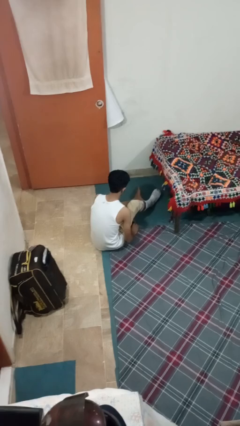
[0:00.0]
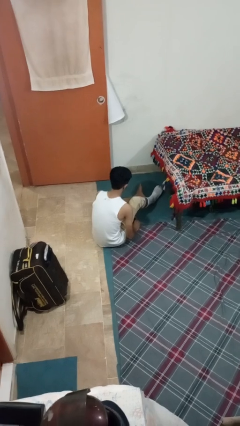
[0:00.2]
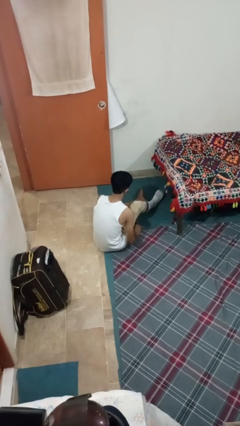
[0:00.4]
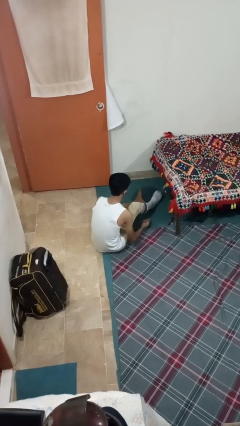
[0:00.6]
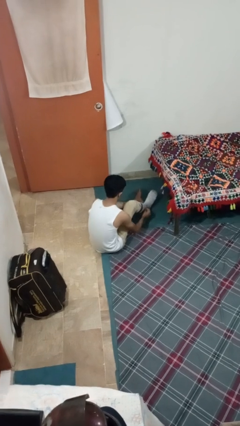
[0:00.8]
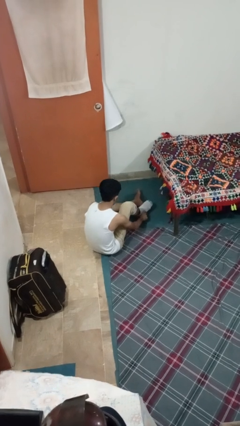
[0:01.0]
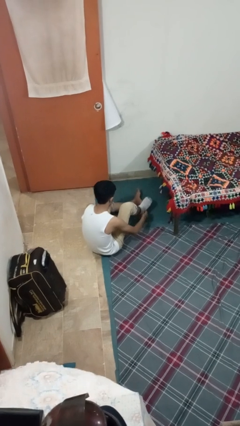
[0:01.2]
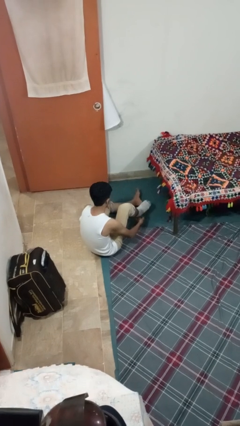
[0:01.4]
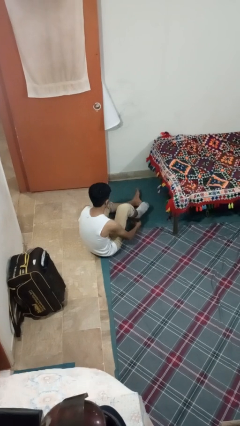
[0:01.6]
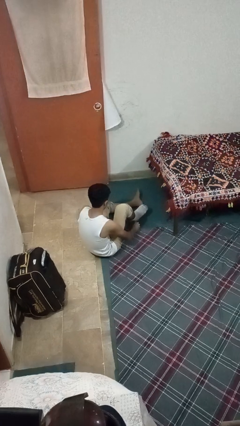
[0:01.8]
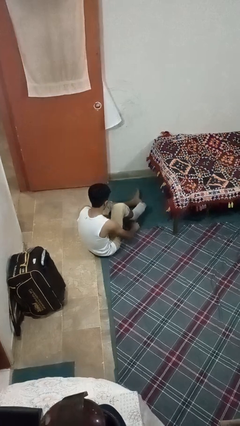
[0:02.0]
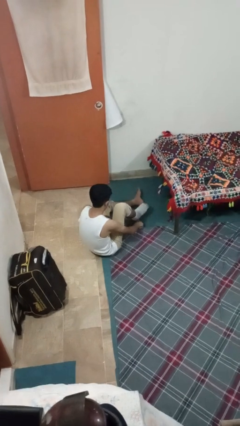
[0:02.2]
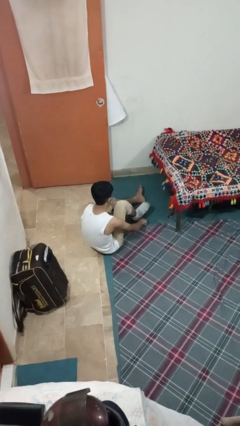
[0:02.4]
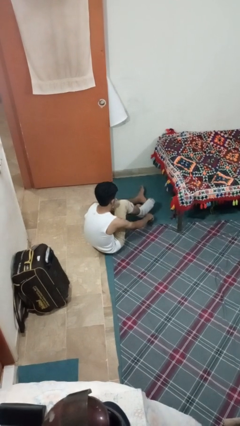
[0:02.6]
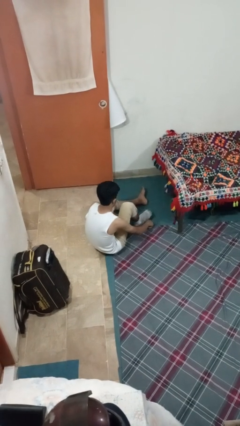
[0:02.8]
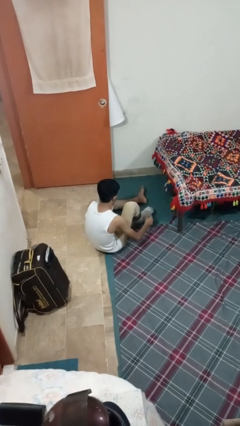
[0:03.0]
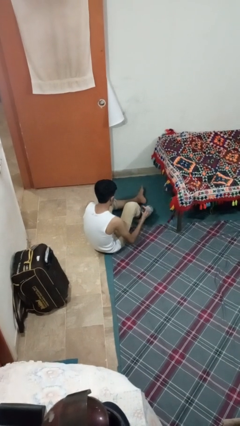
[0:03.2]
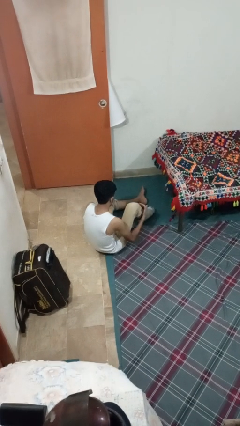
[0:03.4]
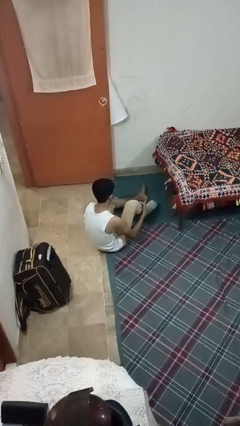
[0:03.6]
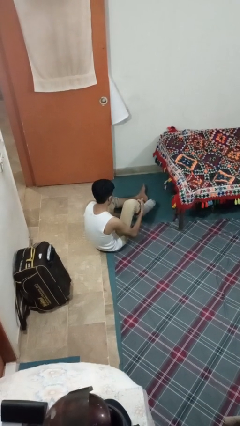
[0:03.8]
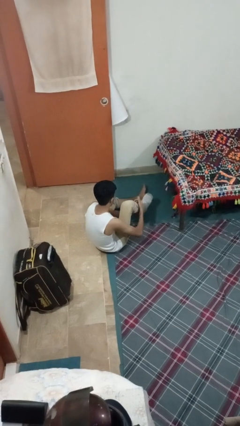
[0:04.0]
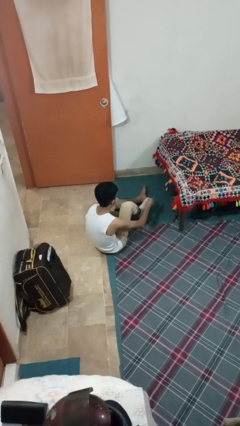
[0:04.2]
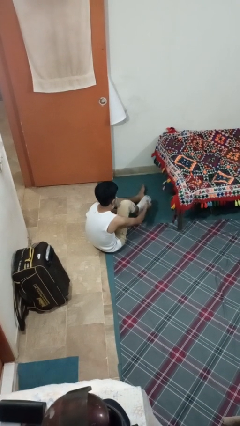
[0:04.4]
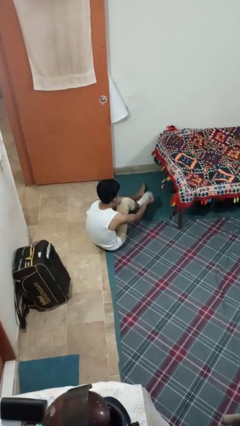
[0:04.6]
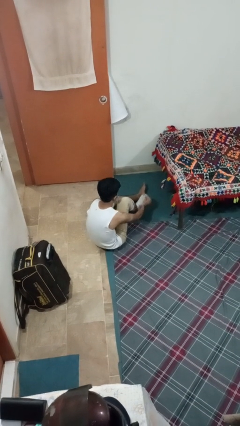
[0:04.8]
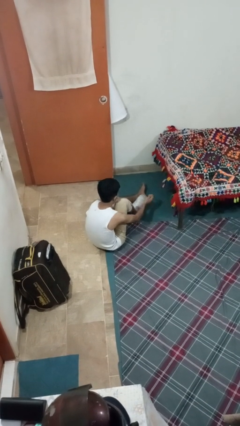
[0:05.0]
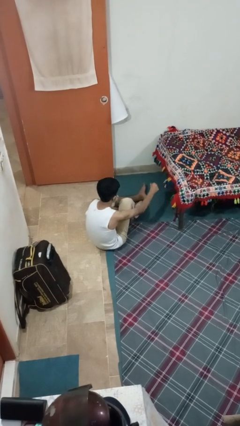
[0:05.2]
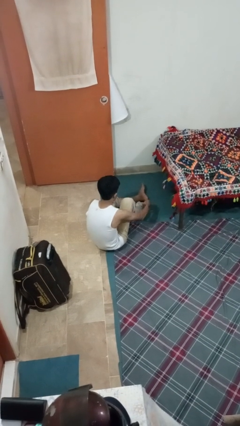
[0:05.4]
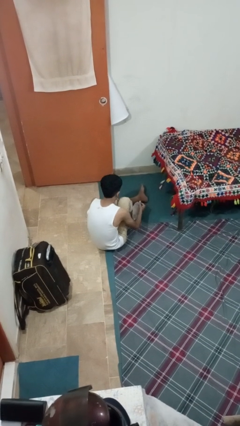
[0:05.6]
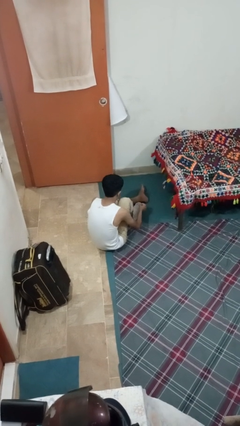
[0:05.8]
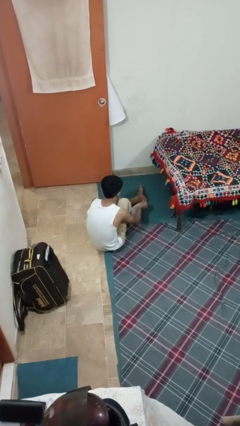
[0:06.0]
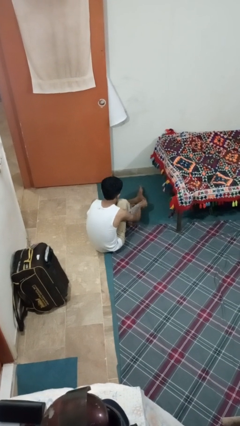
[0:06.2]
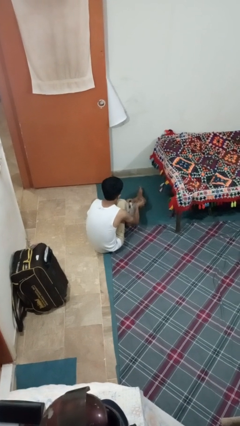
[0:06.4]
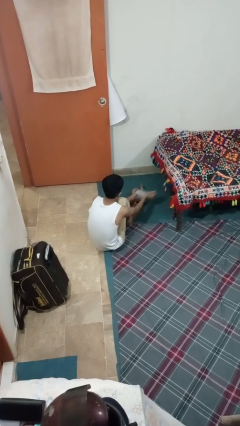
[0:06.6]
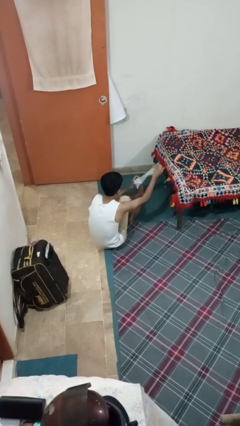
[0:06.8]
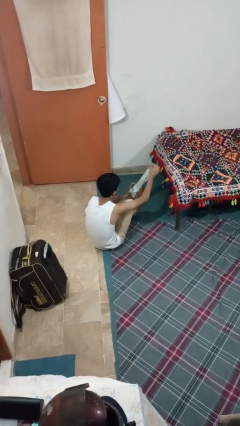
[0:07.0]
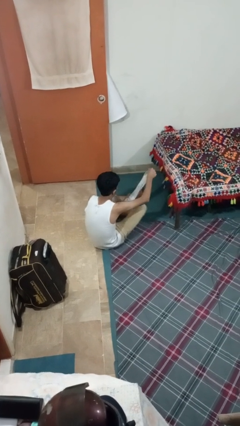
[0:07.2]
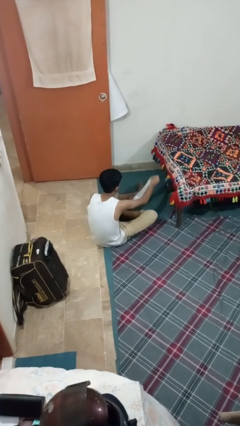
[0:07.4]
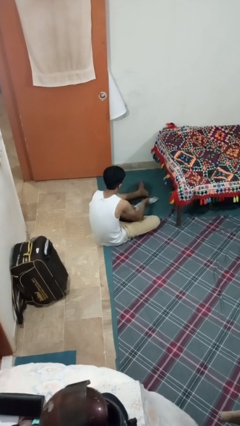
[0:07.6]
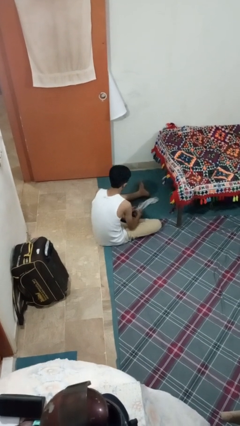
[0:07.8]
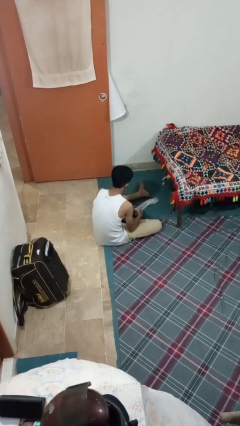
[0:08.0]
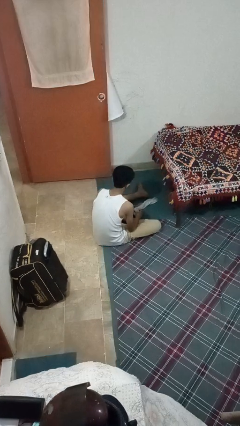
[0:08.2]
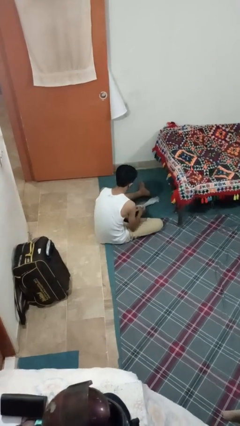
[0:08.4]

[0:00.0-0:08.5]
person takes off socks

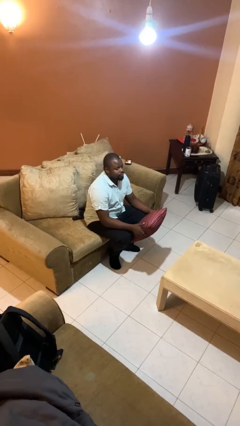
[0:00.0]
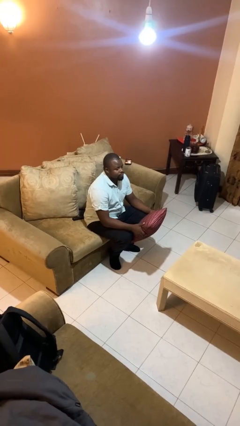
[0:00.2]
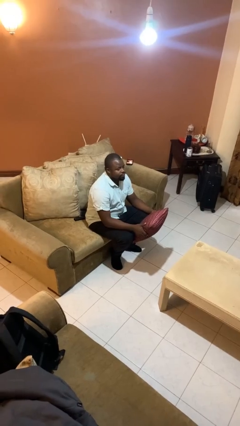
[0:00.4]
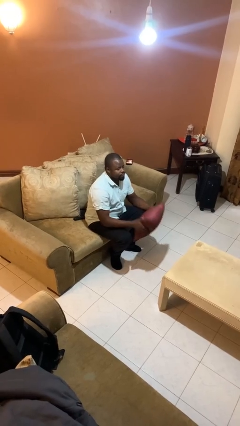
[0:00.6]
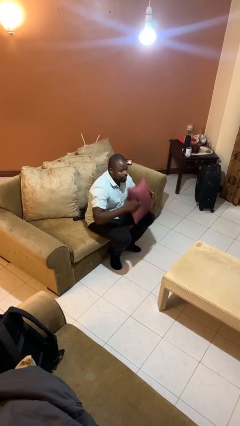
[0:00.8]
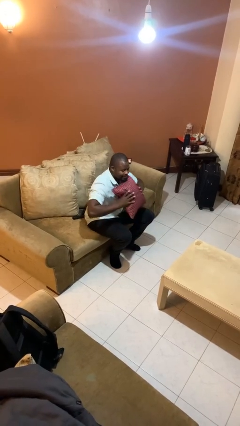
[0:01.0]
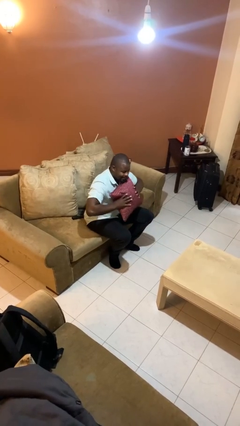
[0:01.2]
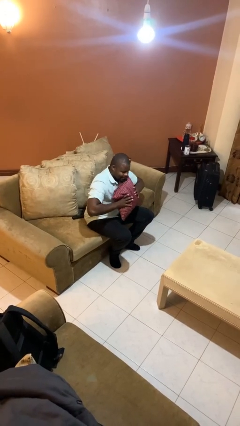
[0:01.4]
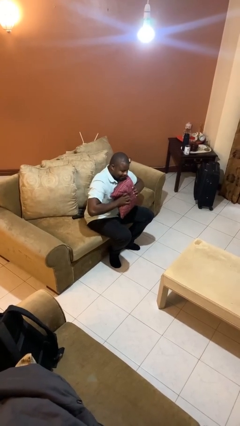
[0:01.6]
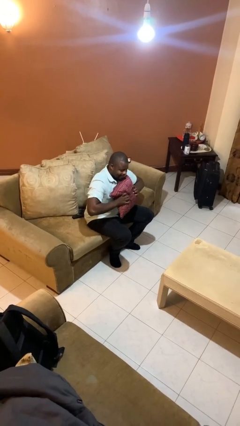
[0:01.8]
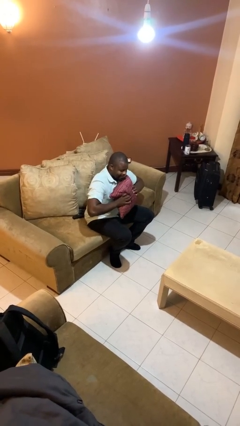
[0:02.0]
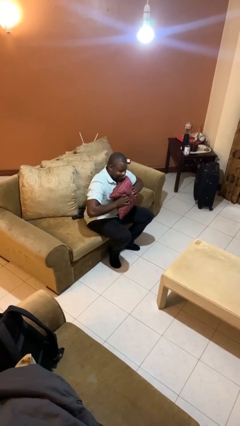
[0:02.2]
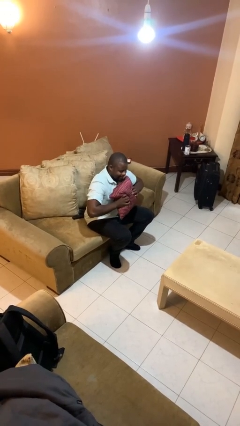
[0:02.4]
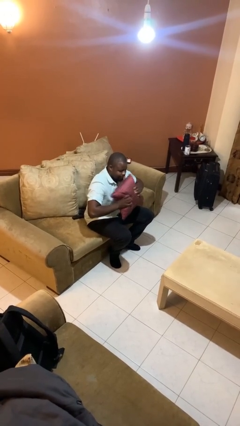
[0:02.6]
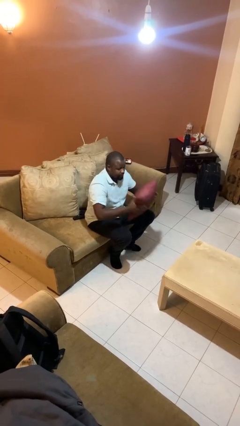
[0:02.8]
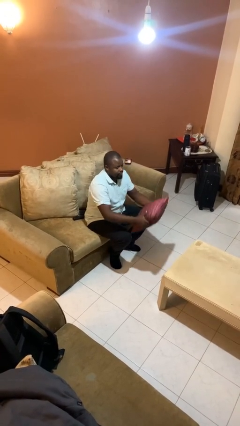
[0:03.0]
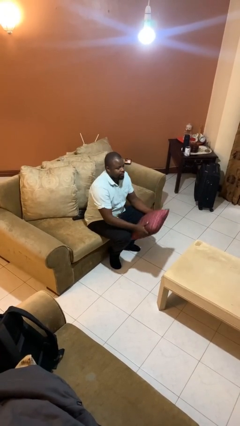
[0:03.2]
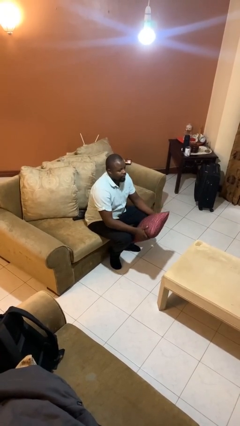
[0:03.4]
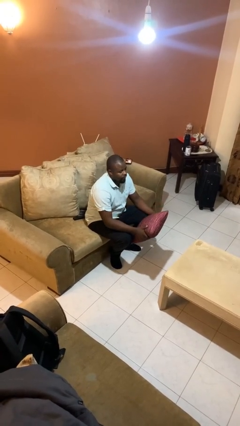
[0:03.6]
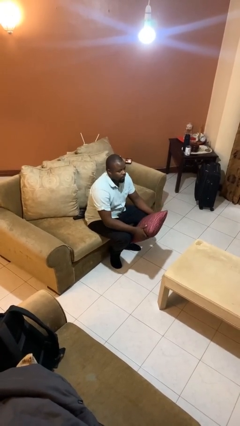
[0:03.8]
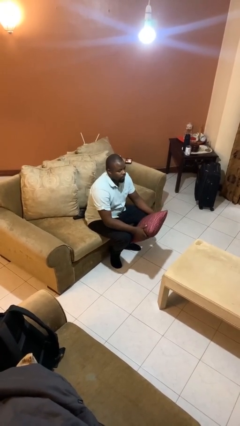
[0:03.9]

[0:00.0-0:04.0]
person squeezes object

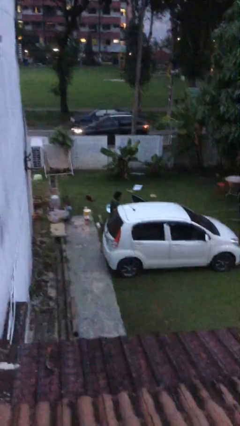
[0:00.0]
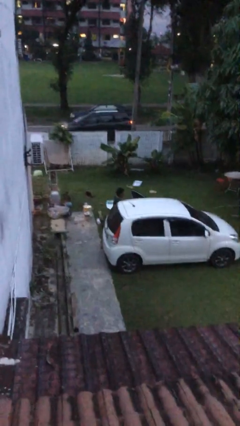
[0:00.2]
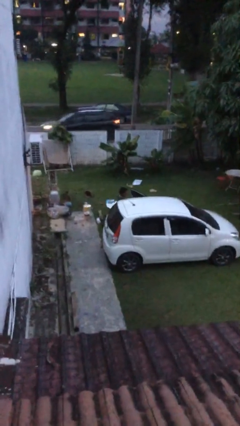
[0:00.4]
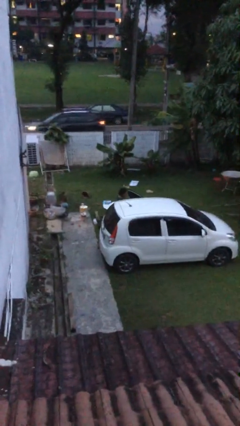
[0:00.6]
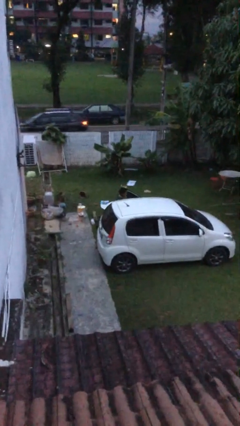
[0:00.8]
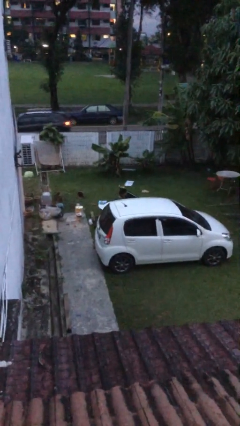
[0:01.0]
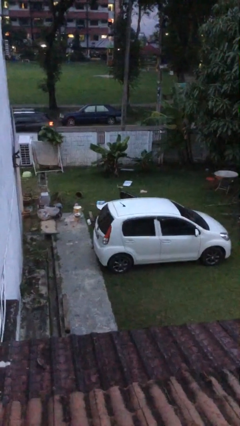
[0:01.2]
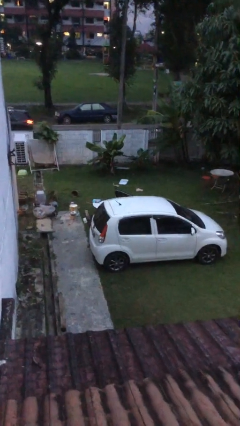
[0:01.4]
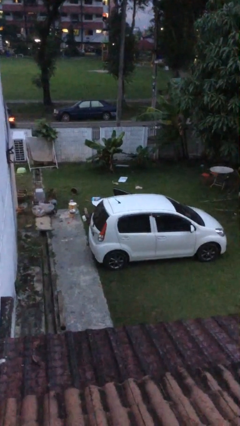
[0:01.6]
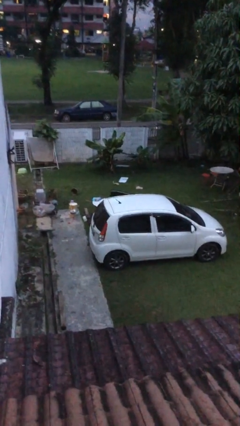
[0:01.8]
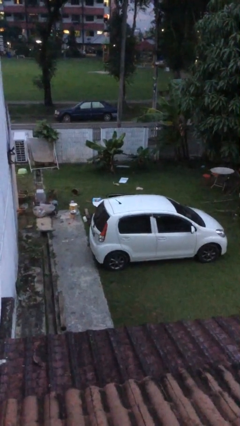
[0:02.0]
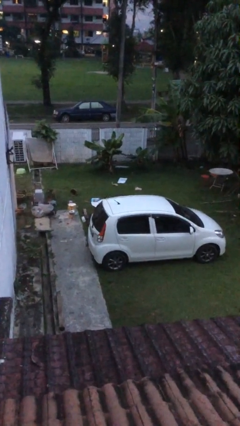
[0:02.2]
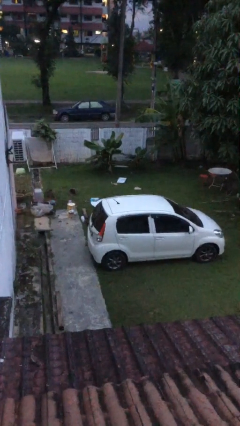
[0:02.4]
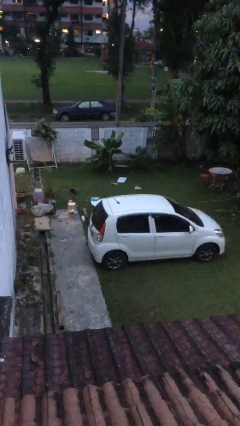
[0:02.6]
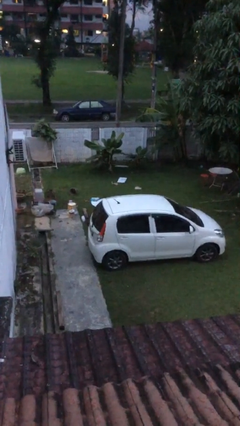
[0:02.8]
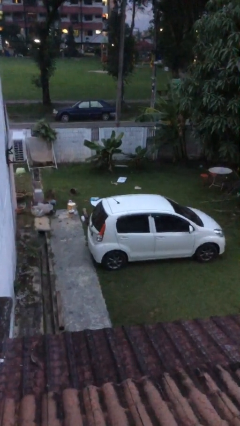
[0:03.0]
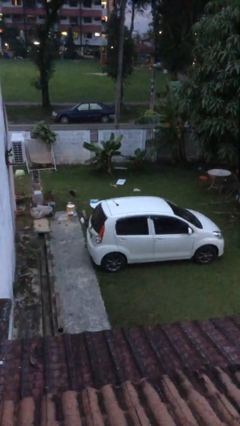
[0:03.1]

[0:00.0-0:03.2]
car picks up person

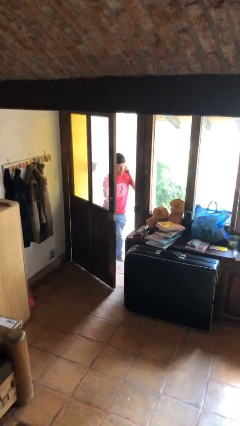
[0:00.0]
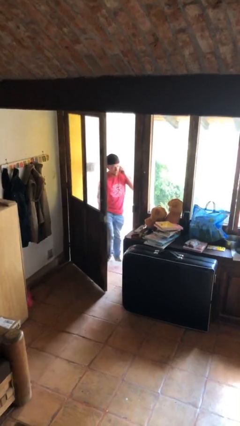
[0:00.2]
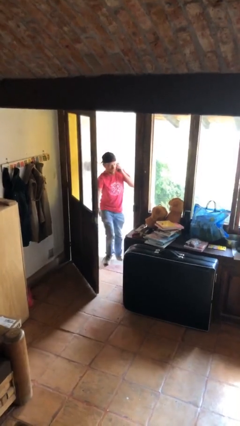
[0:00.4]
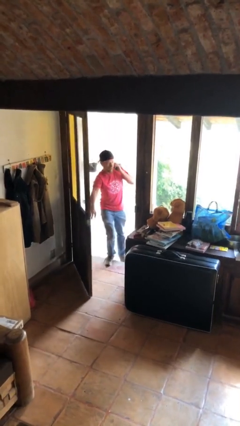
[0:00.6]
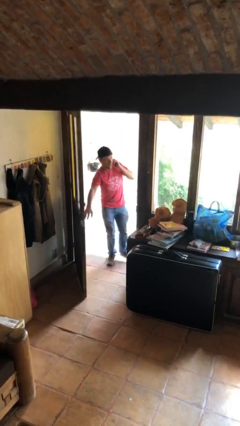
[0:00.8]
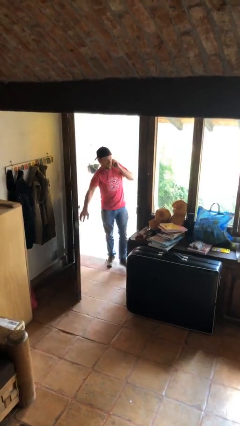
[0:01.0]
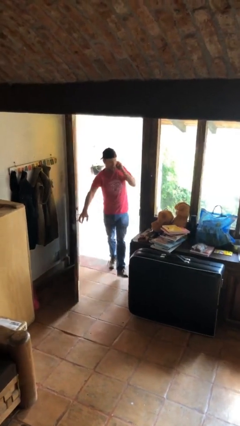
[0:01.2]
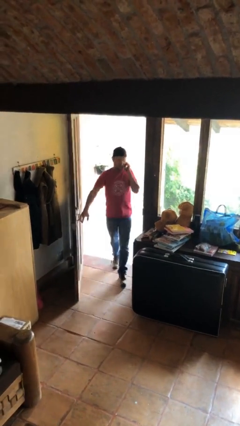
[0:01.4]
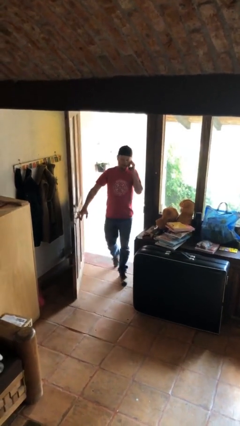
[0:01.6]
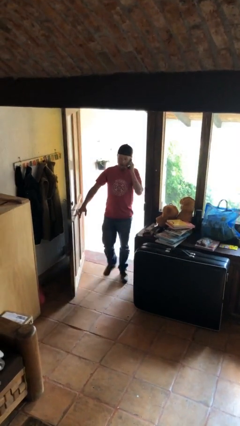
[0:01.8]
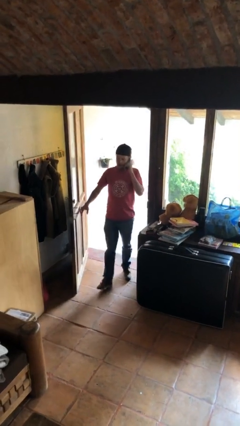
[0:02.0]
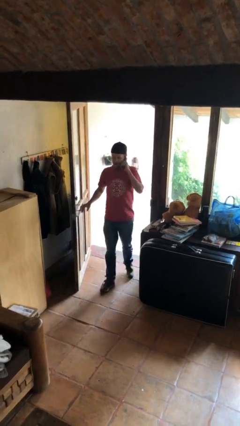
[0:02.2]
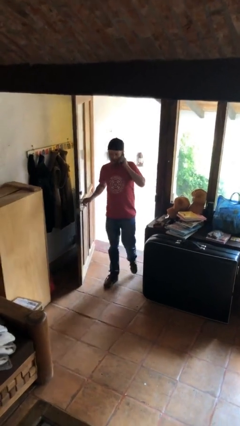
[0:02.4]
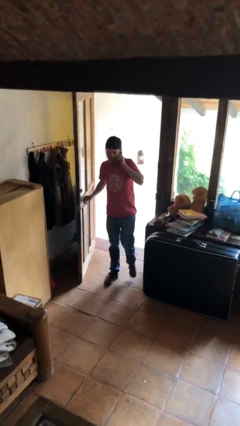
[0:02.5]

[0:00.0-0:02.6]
person enters scene through structure

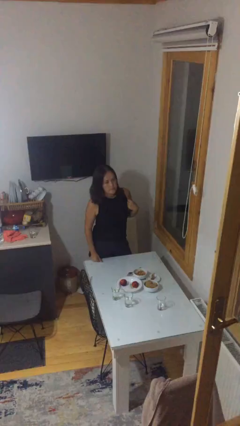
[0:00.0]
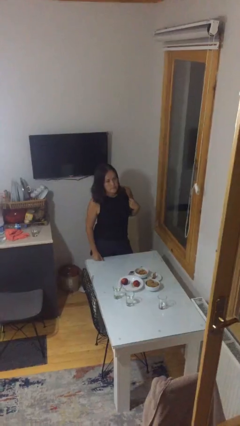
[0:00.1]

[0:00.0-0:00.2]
person opens home window
